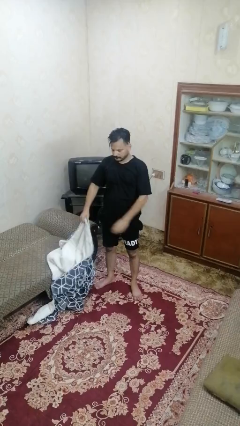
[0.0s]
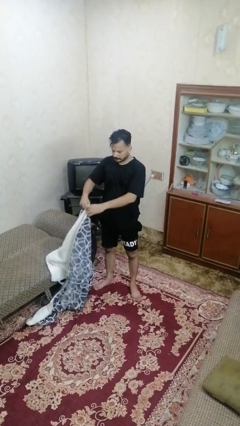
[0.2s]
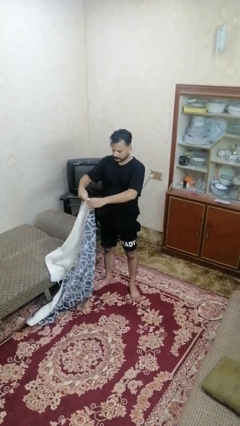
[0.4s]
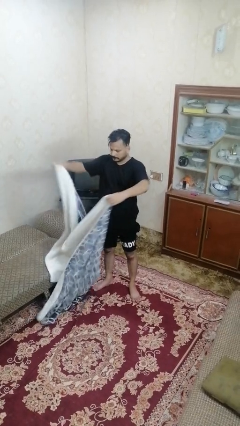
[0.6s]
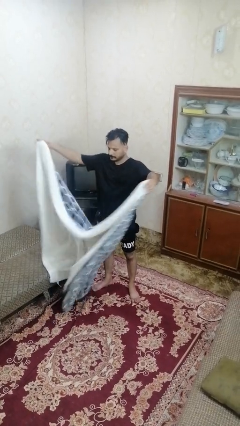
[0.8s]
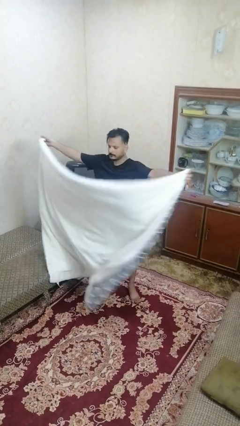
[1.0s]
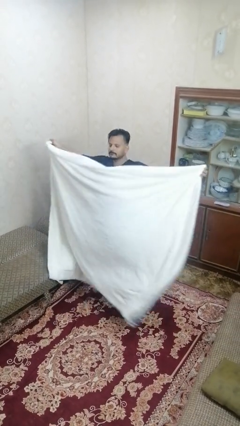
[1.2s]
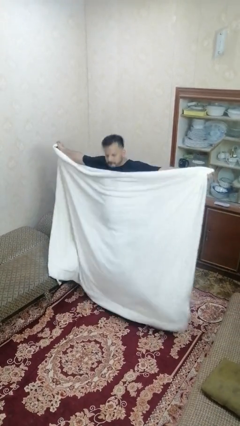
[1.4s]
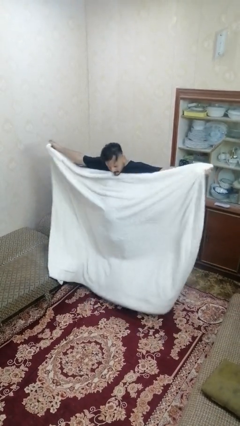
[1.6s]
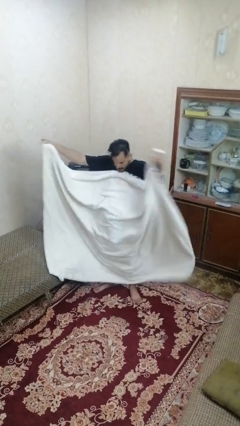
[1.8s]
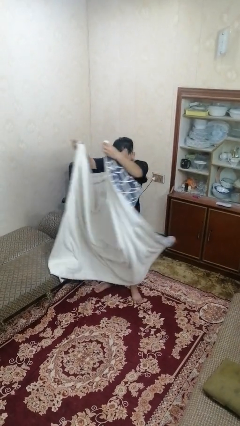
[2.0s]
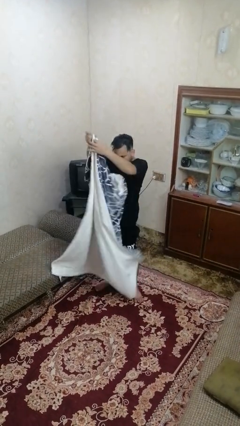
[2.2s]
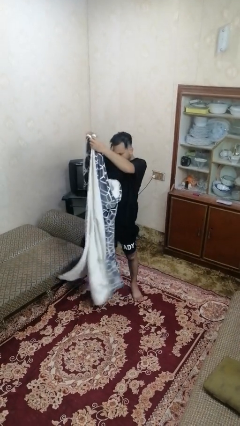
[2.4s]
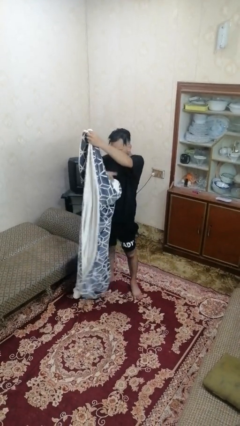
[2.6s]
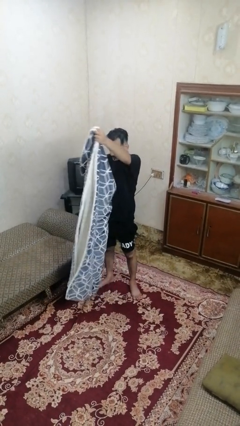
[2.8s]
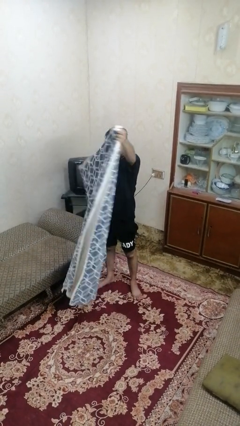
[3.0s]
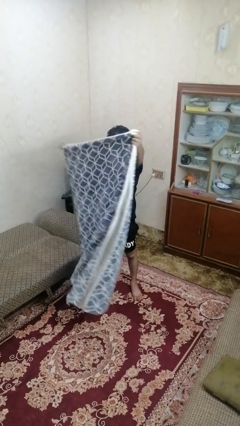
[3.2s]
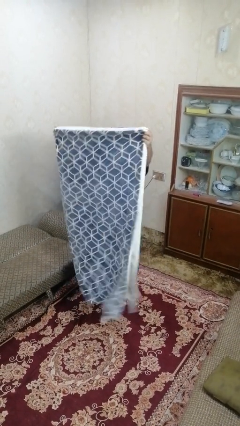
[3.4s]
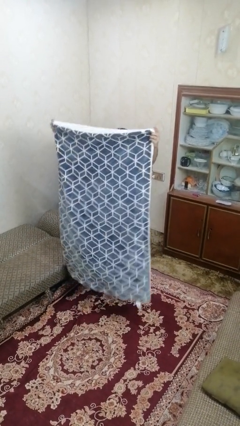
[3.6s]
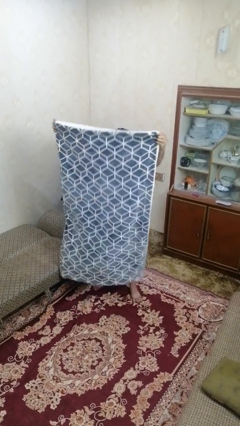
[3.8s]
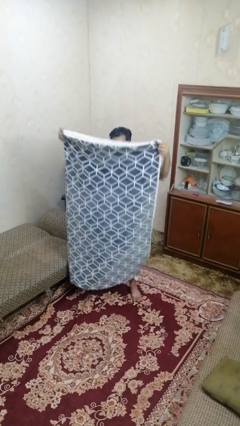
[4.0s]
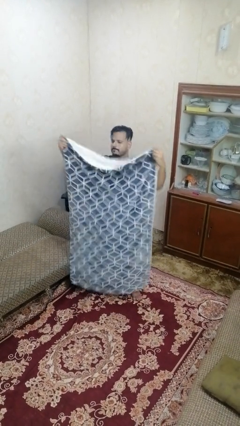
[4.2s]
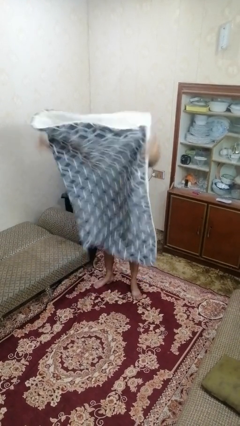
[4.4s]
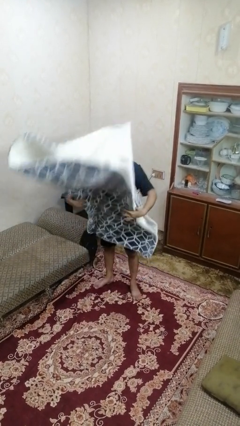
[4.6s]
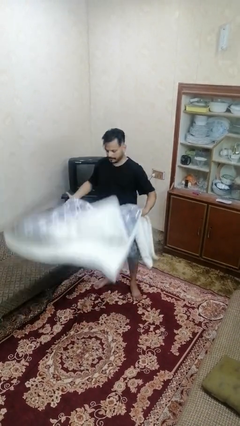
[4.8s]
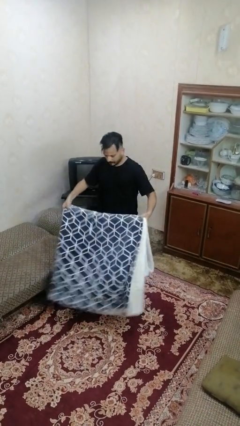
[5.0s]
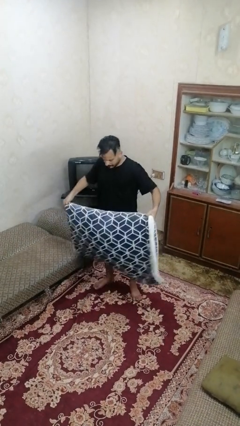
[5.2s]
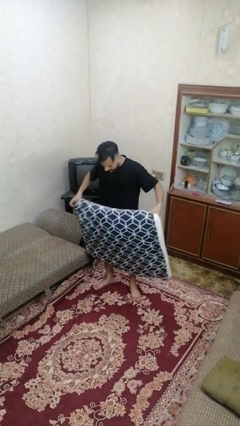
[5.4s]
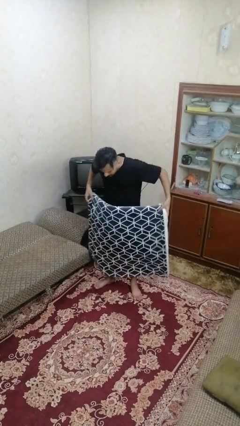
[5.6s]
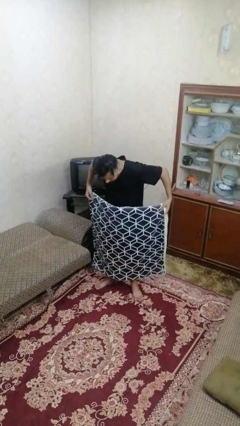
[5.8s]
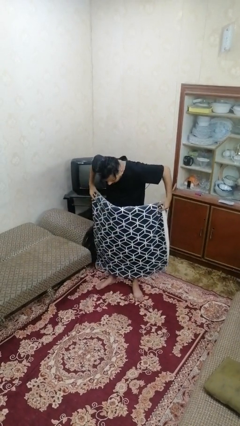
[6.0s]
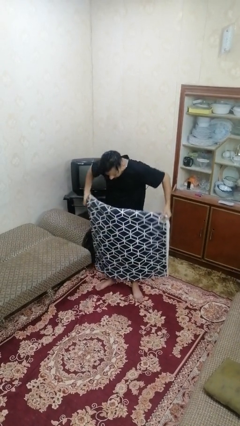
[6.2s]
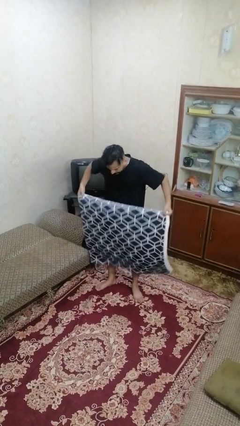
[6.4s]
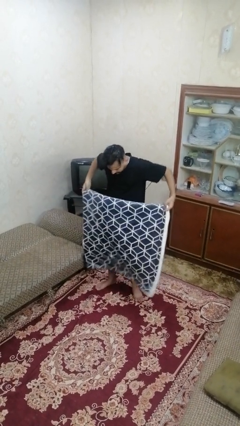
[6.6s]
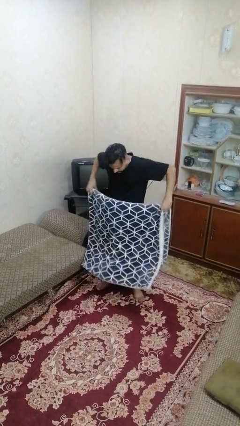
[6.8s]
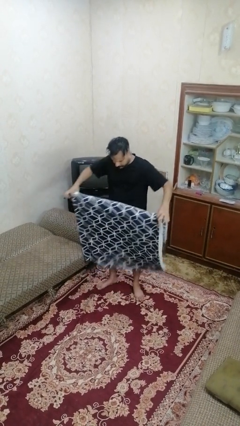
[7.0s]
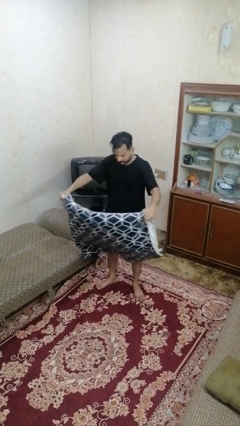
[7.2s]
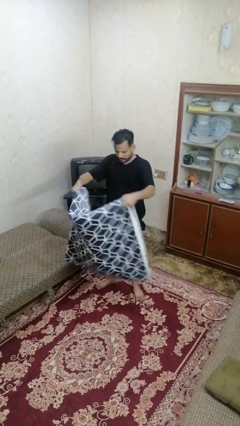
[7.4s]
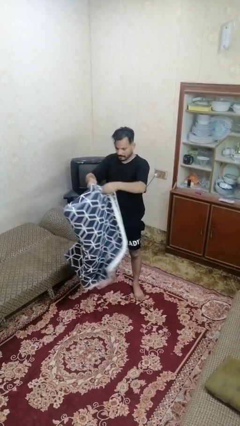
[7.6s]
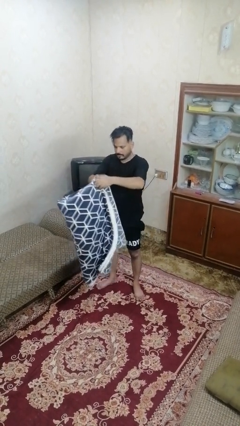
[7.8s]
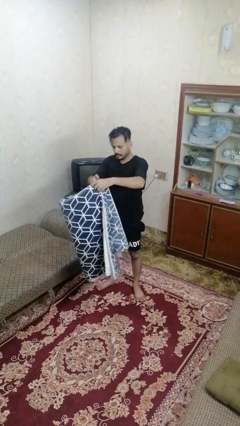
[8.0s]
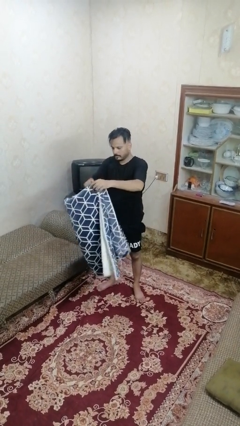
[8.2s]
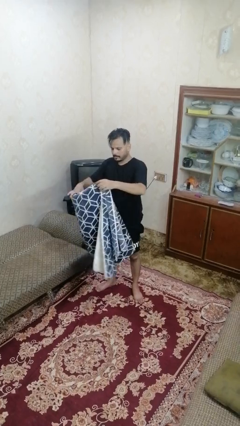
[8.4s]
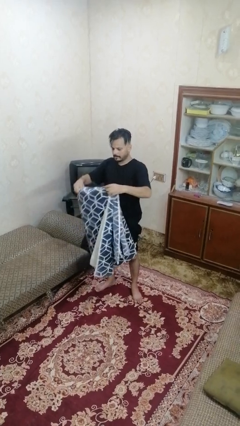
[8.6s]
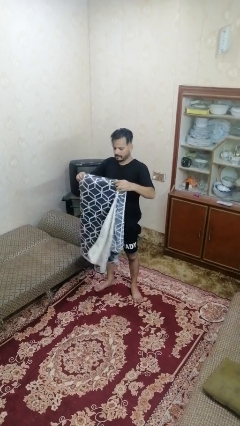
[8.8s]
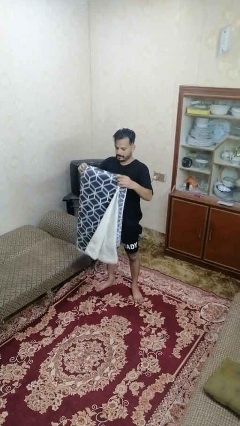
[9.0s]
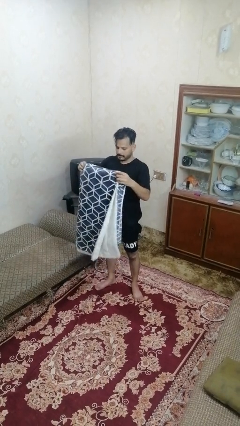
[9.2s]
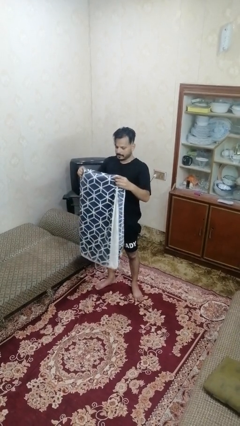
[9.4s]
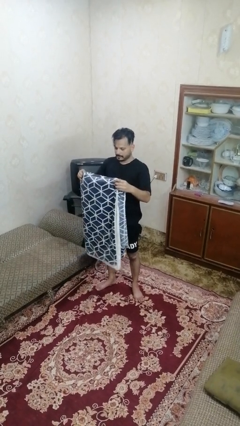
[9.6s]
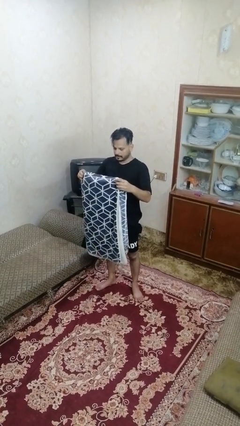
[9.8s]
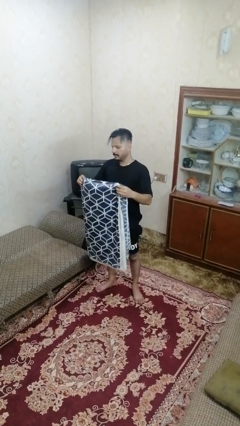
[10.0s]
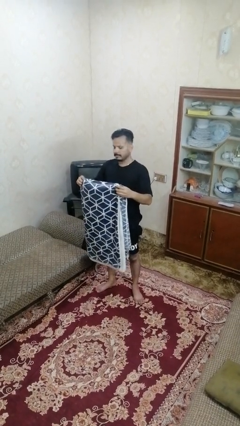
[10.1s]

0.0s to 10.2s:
person folds blanket

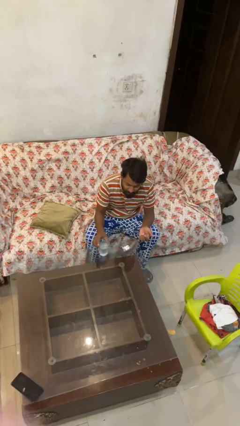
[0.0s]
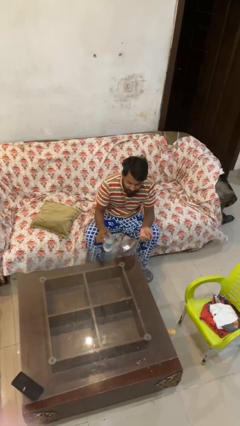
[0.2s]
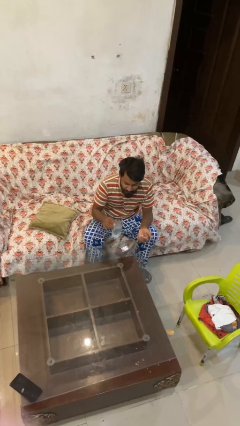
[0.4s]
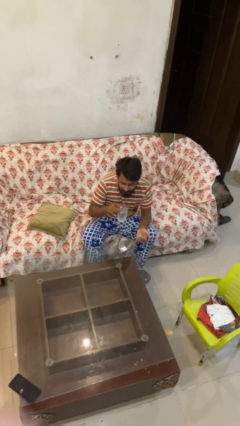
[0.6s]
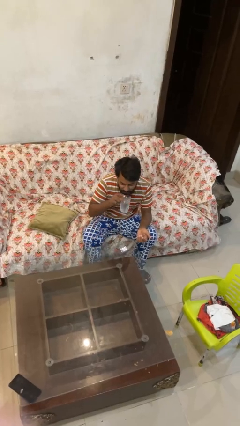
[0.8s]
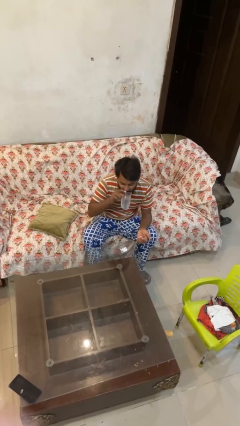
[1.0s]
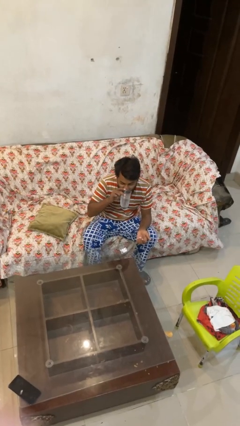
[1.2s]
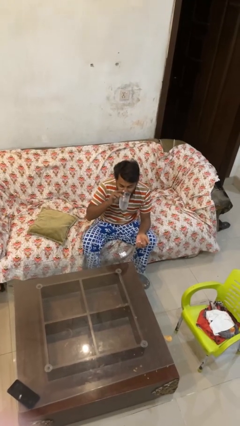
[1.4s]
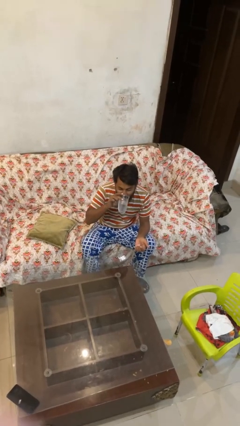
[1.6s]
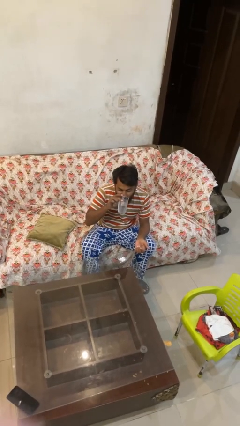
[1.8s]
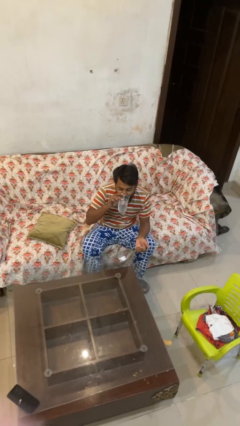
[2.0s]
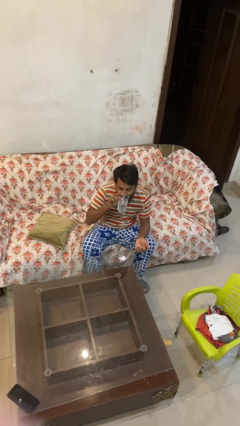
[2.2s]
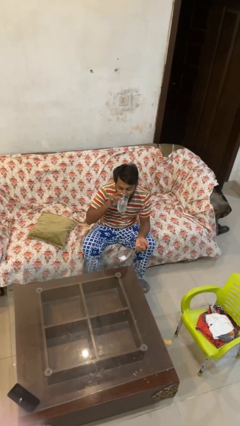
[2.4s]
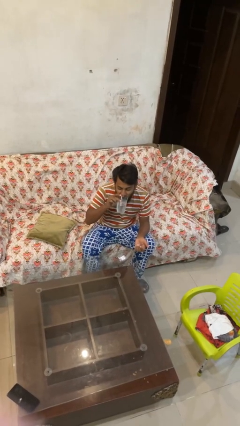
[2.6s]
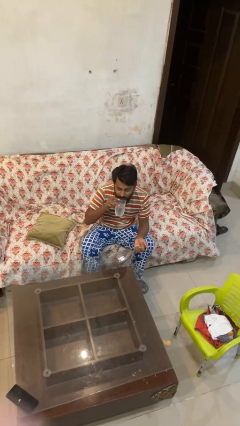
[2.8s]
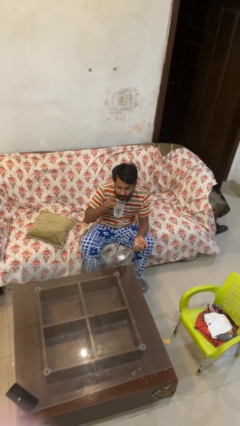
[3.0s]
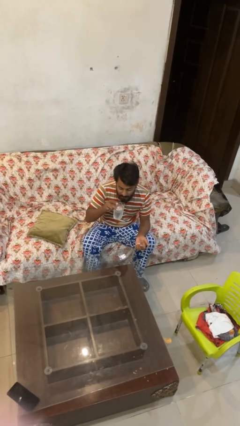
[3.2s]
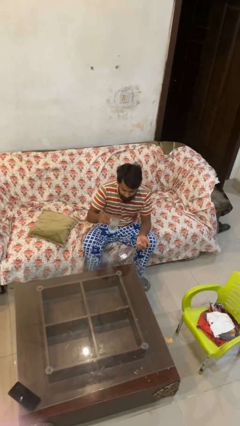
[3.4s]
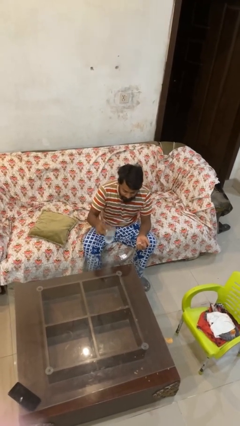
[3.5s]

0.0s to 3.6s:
person drinks from cup

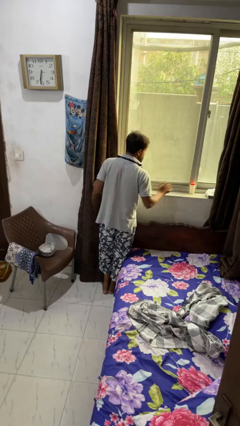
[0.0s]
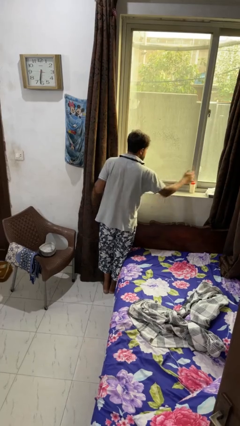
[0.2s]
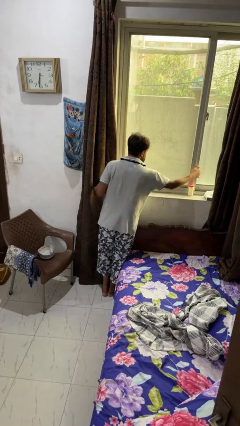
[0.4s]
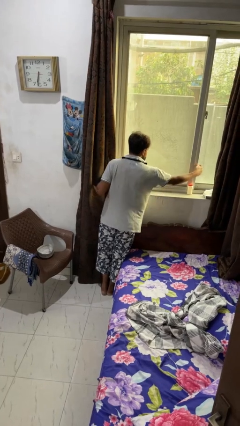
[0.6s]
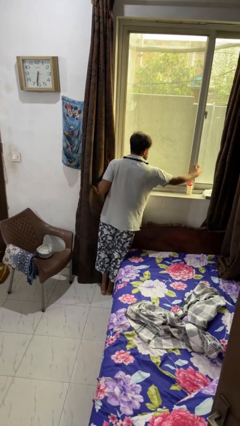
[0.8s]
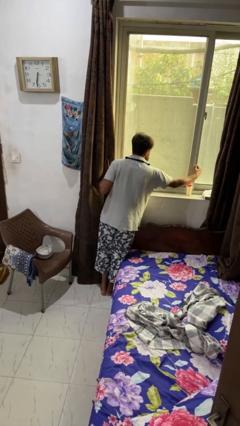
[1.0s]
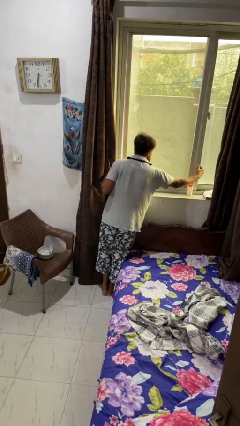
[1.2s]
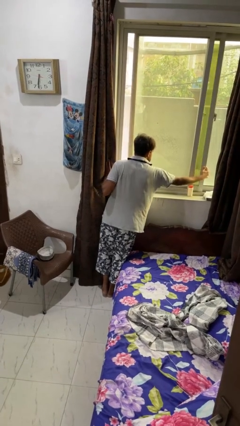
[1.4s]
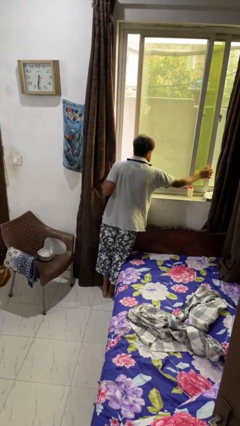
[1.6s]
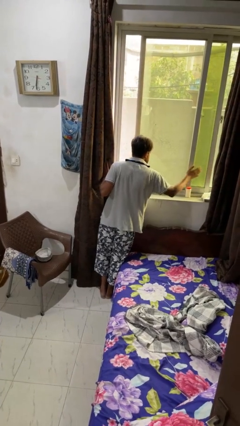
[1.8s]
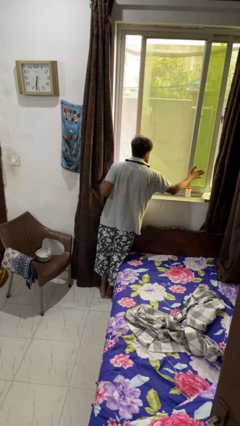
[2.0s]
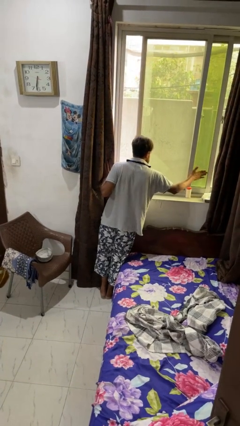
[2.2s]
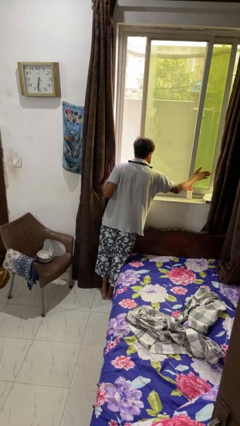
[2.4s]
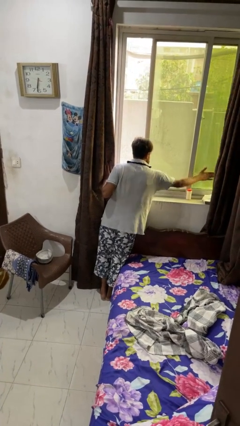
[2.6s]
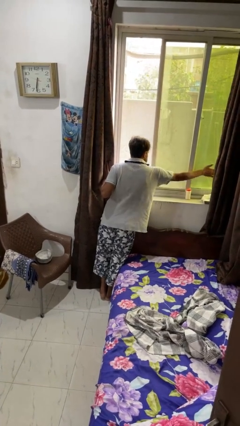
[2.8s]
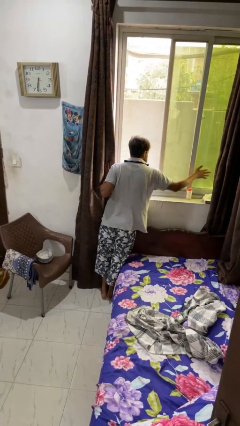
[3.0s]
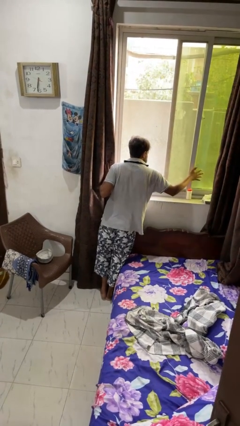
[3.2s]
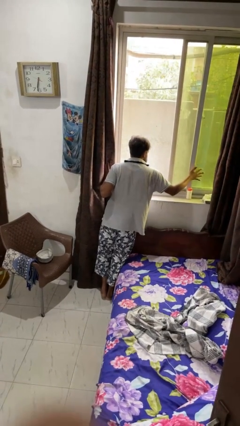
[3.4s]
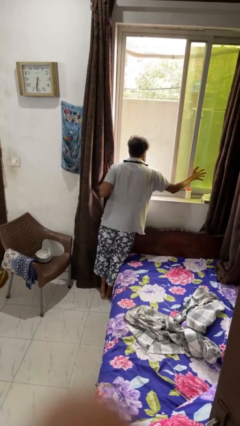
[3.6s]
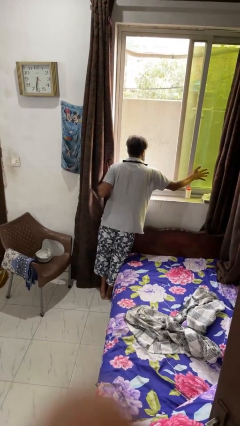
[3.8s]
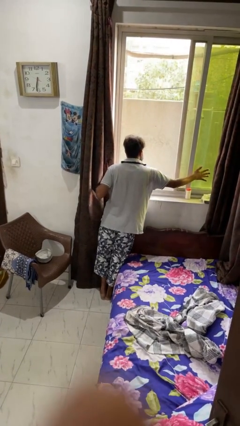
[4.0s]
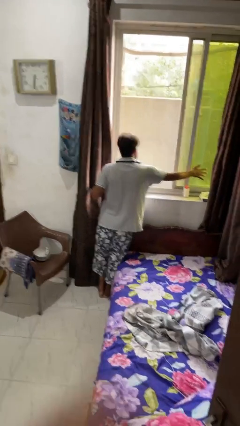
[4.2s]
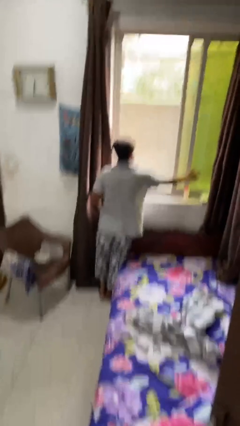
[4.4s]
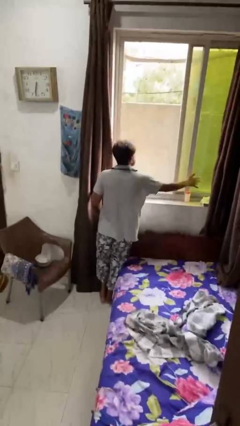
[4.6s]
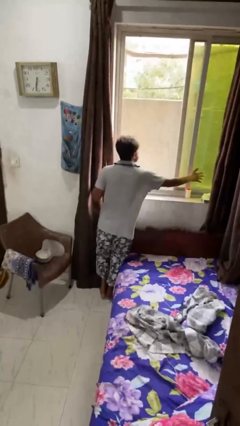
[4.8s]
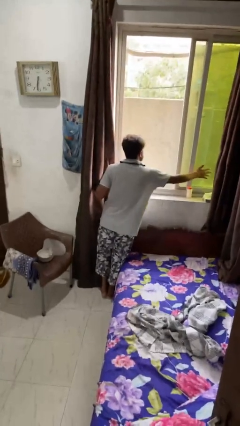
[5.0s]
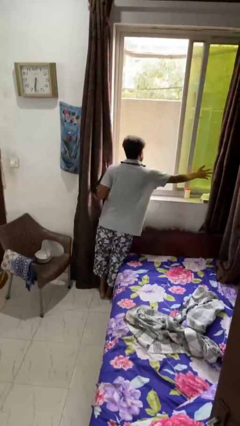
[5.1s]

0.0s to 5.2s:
person opens home window
